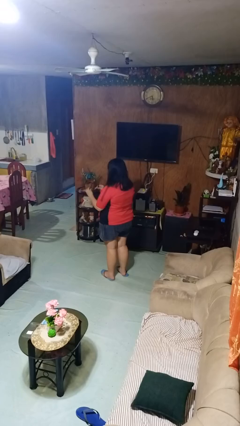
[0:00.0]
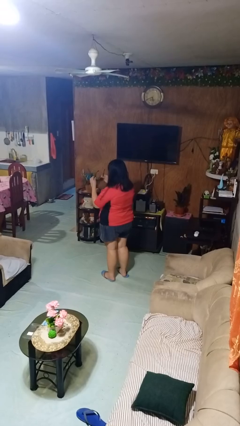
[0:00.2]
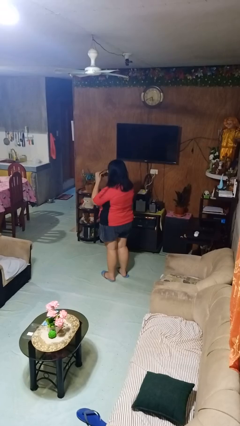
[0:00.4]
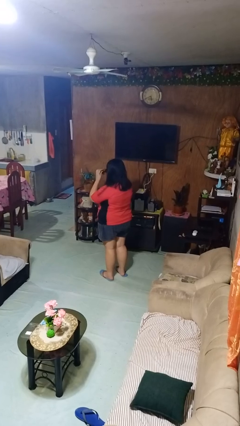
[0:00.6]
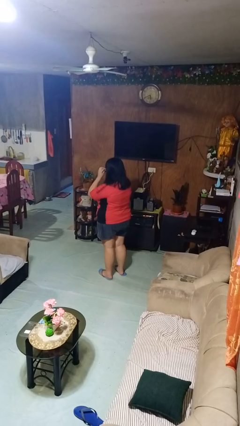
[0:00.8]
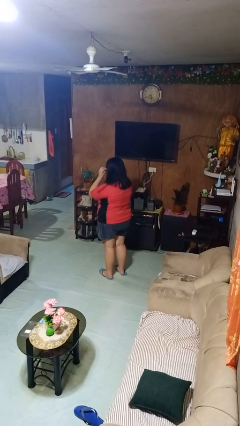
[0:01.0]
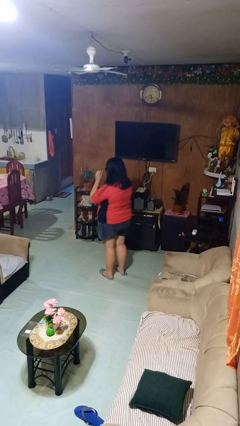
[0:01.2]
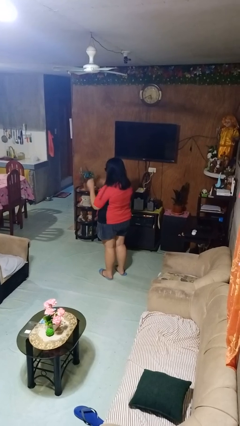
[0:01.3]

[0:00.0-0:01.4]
person puts on sunglasses
